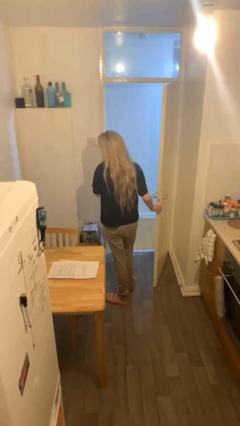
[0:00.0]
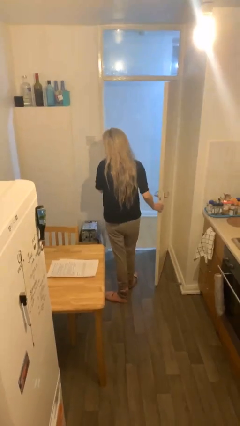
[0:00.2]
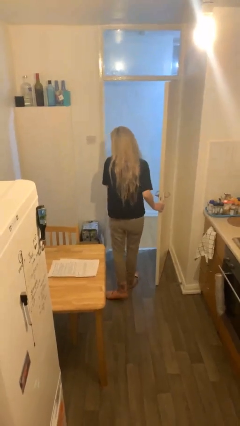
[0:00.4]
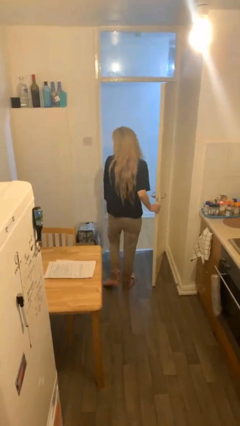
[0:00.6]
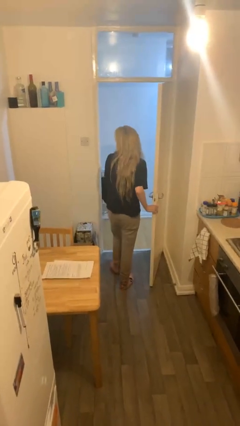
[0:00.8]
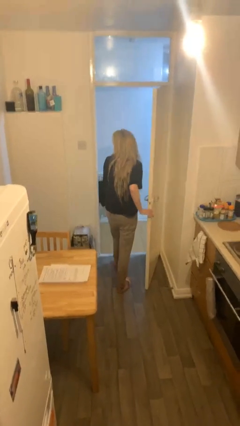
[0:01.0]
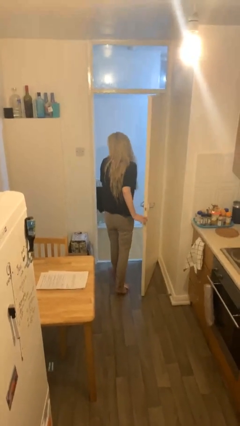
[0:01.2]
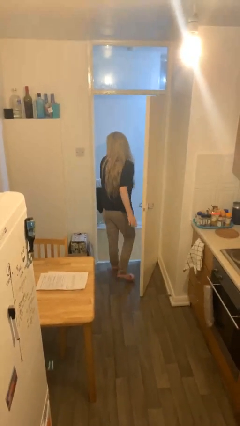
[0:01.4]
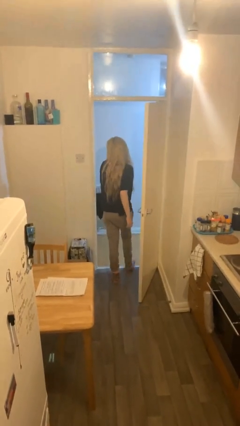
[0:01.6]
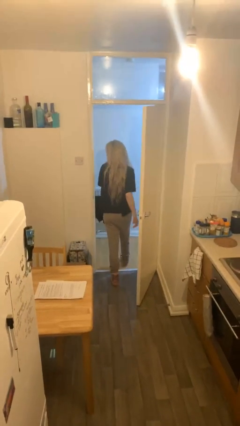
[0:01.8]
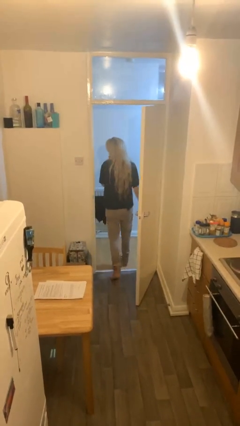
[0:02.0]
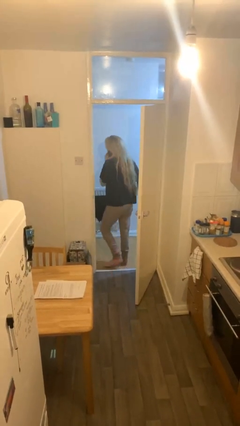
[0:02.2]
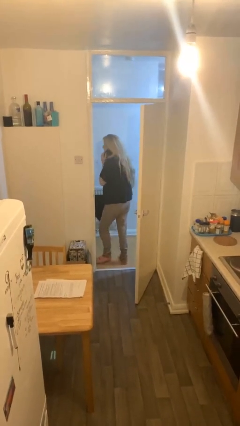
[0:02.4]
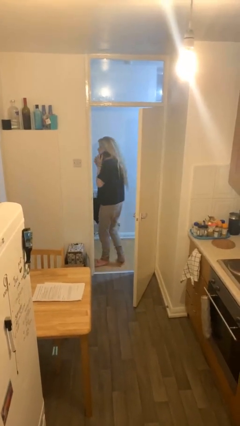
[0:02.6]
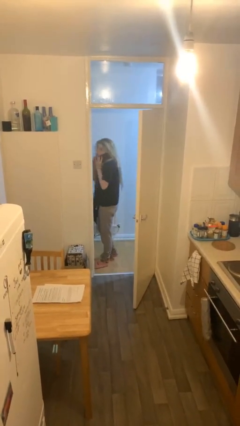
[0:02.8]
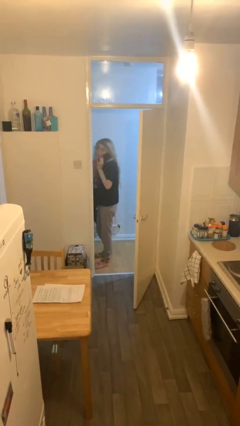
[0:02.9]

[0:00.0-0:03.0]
person exits scene through structure

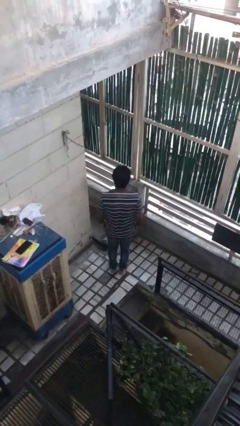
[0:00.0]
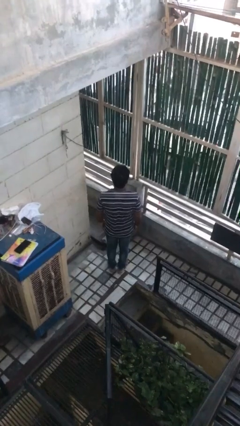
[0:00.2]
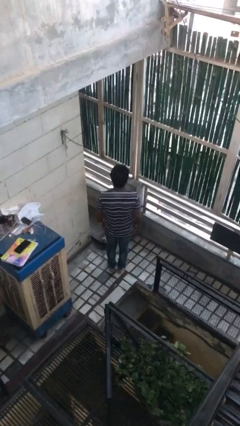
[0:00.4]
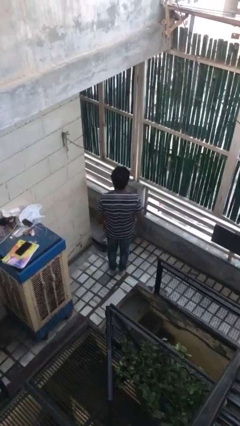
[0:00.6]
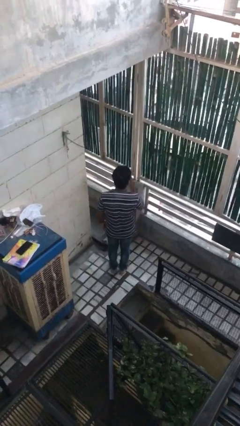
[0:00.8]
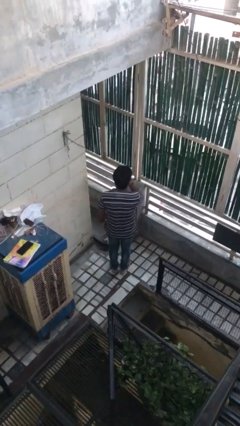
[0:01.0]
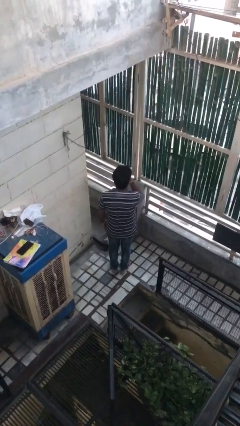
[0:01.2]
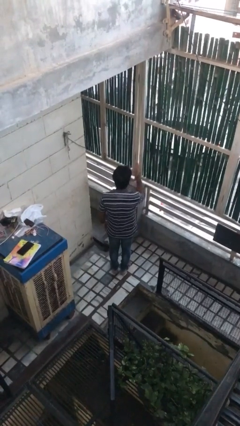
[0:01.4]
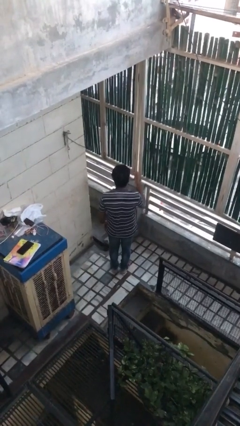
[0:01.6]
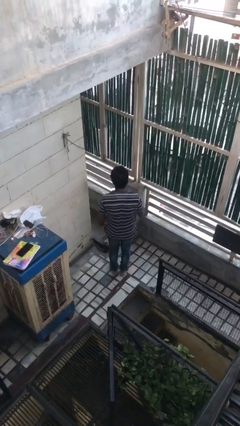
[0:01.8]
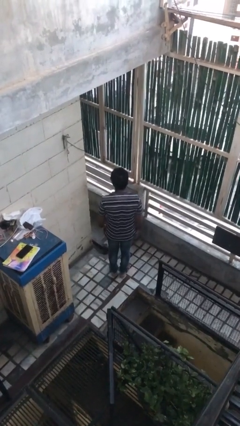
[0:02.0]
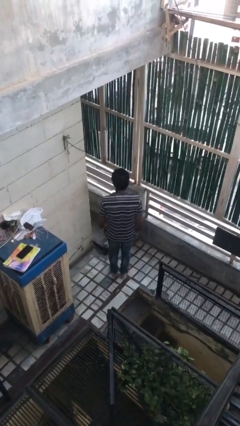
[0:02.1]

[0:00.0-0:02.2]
person gestures blow kiss

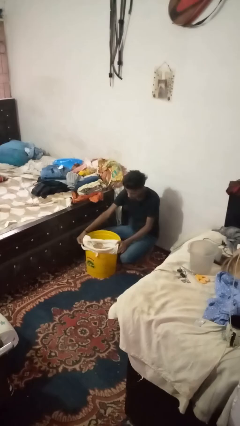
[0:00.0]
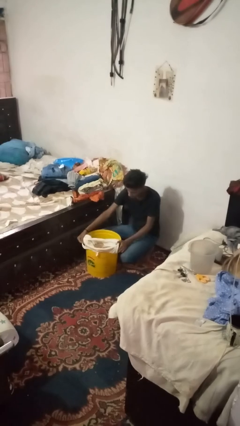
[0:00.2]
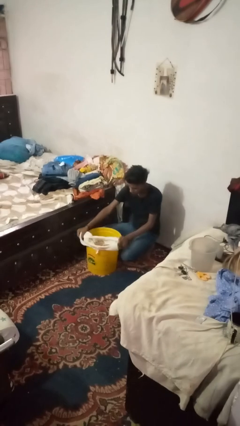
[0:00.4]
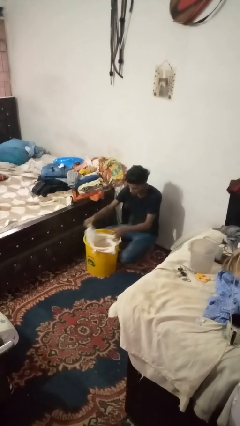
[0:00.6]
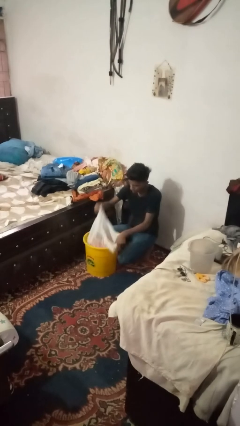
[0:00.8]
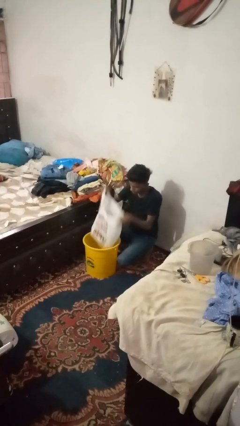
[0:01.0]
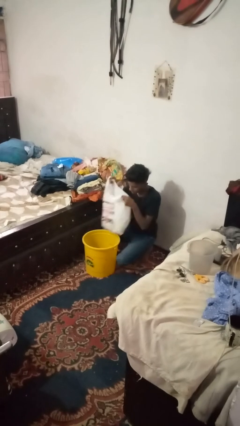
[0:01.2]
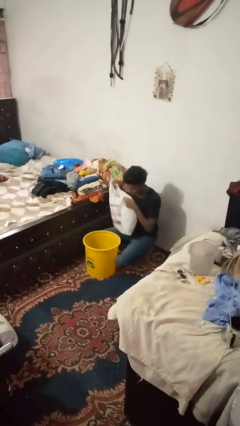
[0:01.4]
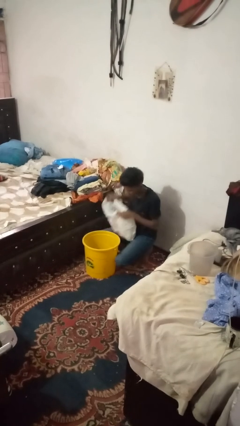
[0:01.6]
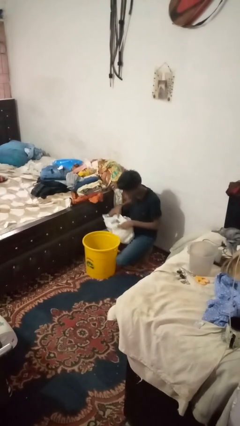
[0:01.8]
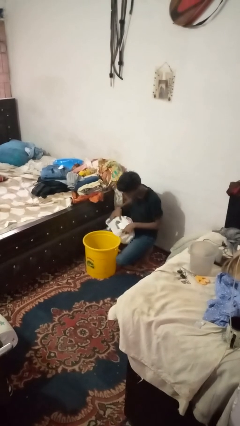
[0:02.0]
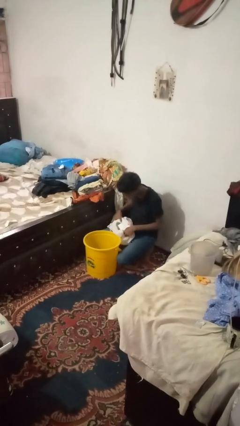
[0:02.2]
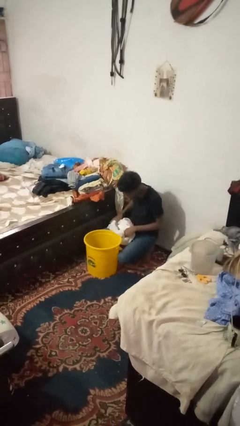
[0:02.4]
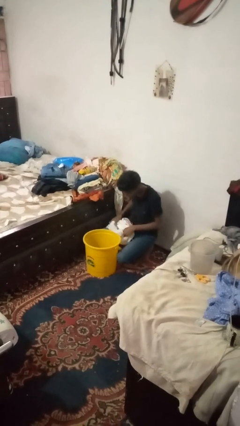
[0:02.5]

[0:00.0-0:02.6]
person removes trashbag from trashcan

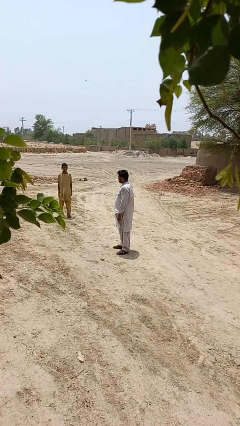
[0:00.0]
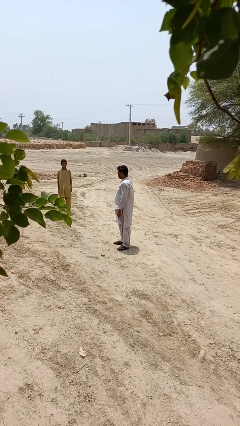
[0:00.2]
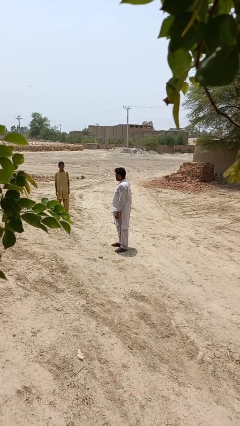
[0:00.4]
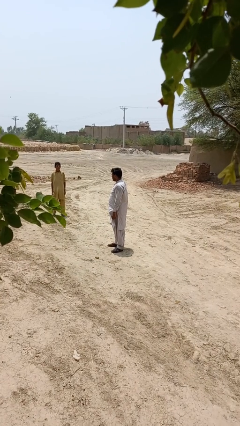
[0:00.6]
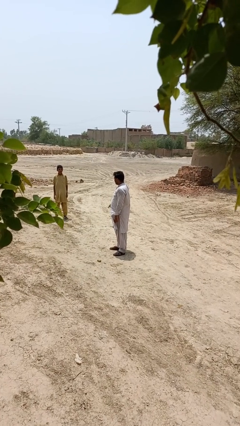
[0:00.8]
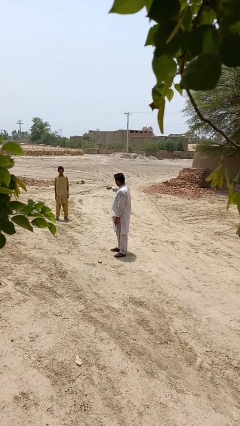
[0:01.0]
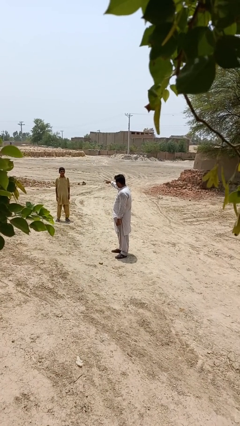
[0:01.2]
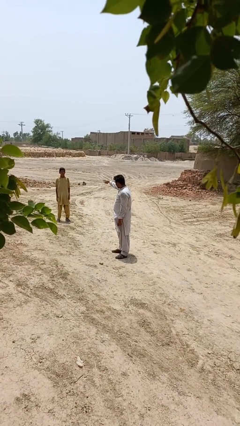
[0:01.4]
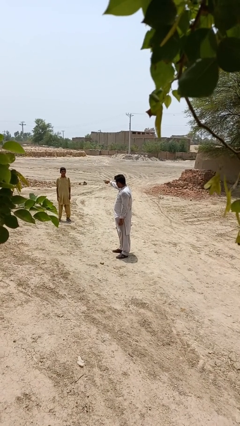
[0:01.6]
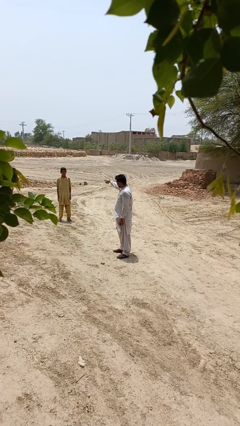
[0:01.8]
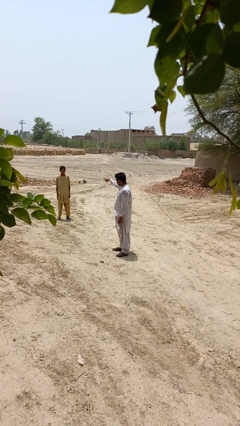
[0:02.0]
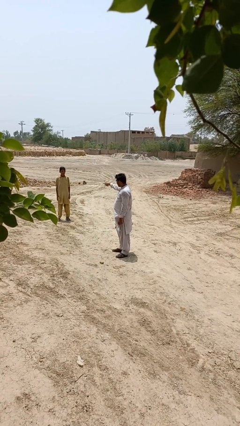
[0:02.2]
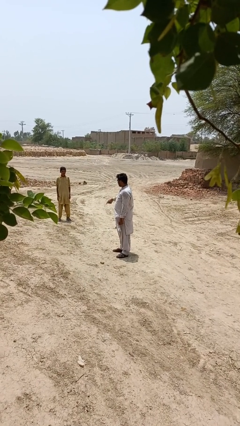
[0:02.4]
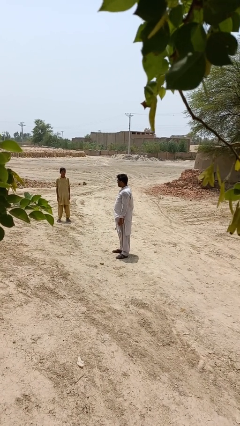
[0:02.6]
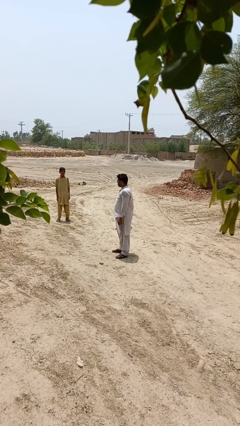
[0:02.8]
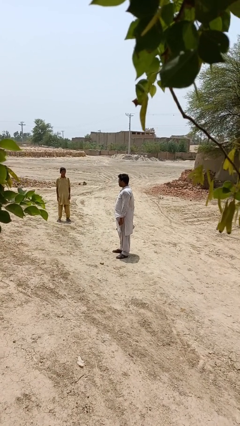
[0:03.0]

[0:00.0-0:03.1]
person points at person

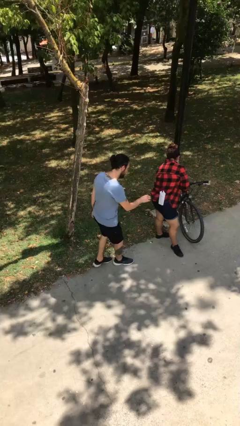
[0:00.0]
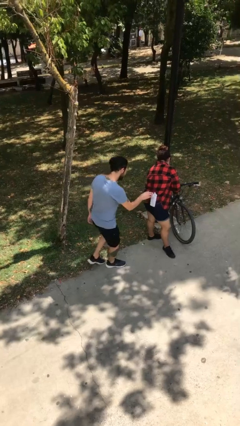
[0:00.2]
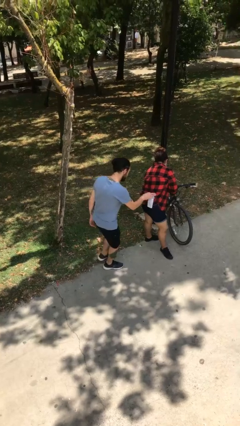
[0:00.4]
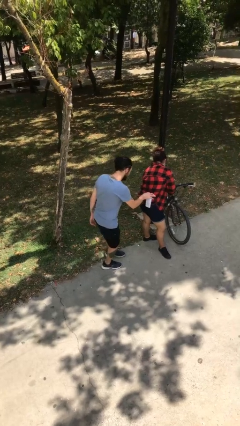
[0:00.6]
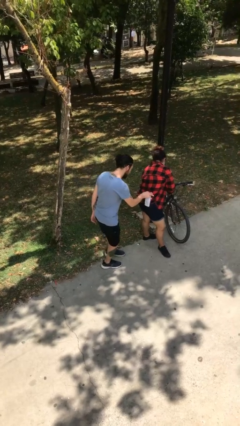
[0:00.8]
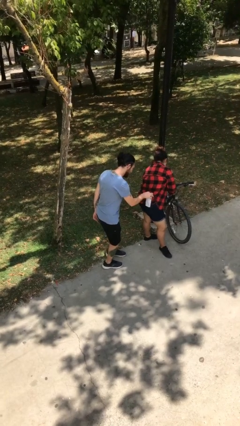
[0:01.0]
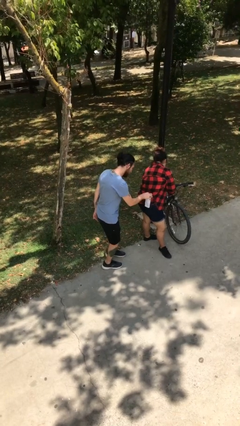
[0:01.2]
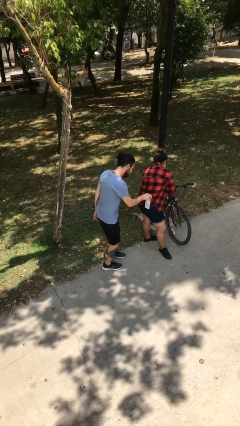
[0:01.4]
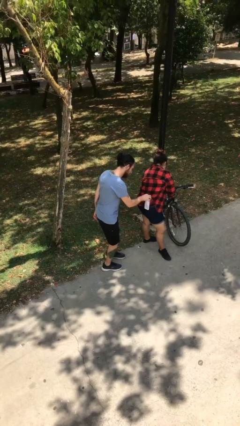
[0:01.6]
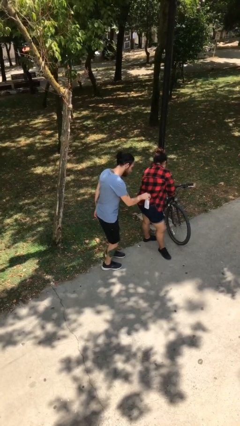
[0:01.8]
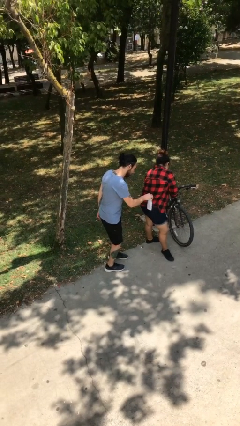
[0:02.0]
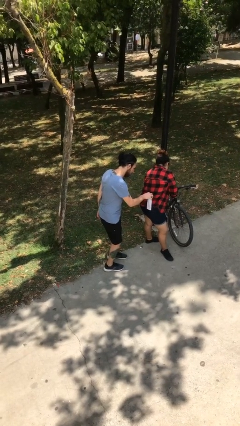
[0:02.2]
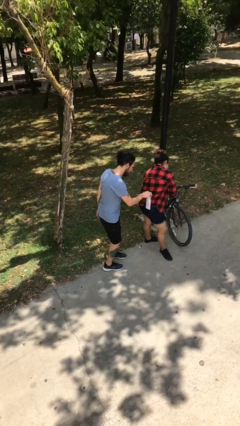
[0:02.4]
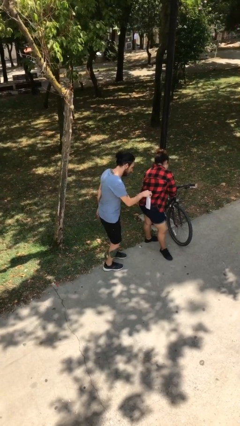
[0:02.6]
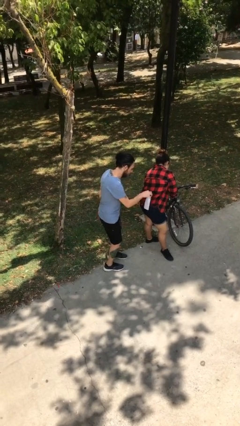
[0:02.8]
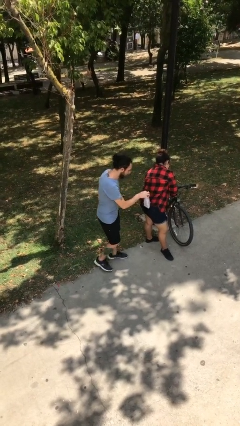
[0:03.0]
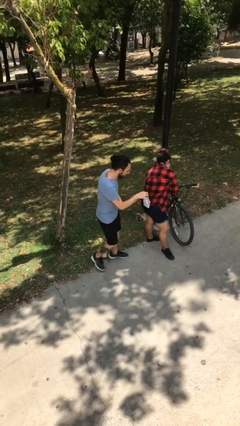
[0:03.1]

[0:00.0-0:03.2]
person steals object from person

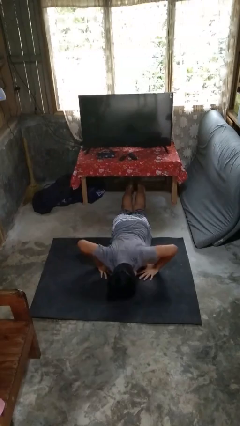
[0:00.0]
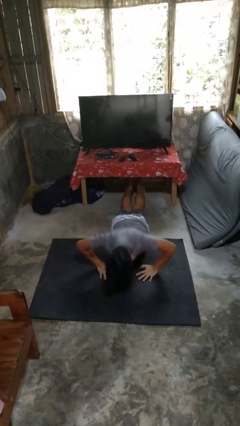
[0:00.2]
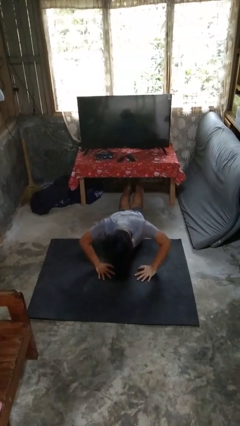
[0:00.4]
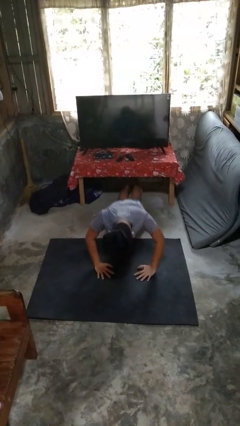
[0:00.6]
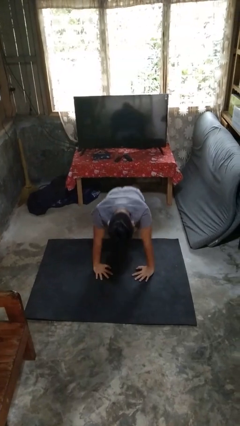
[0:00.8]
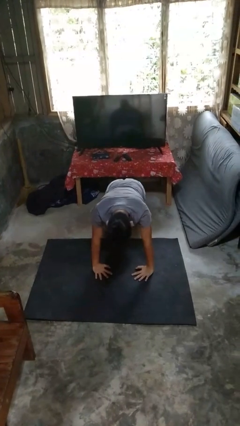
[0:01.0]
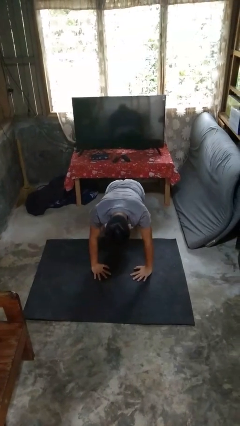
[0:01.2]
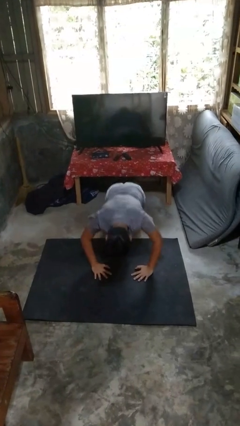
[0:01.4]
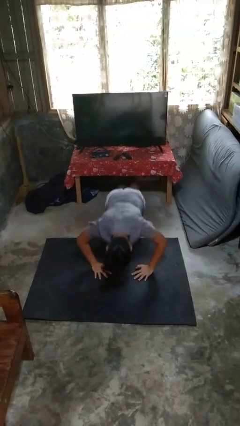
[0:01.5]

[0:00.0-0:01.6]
person exercises with pushup

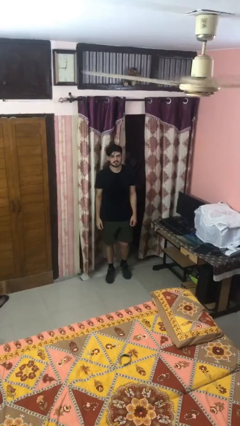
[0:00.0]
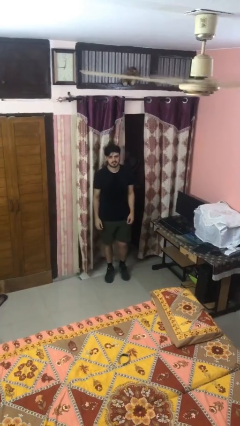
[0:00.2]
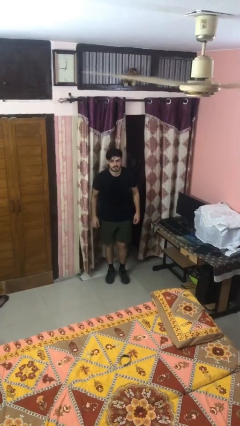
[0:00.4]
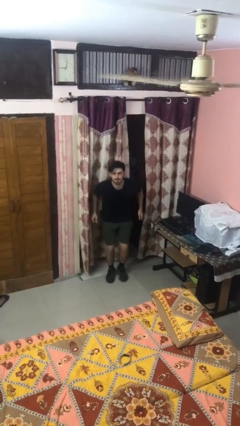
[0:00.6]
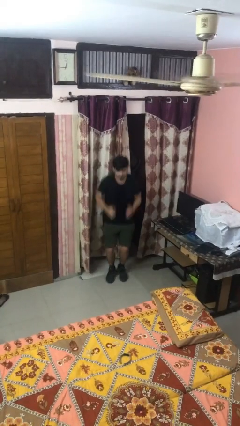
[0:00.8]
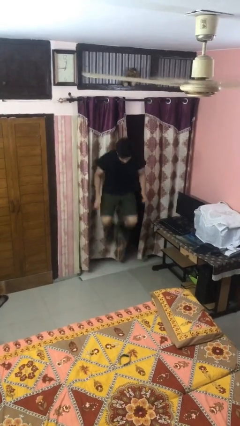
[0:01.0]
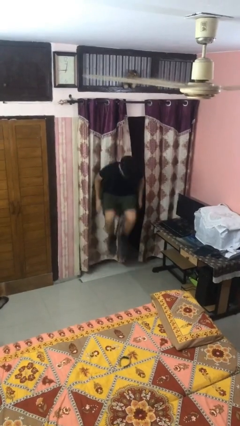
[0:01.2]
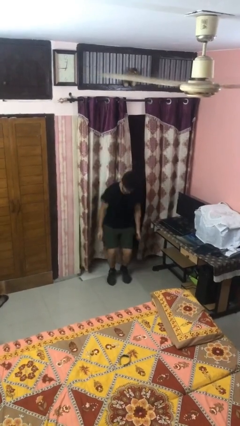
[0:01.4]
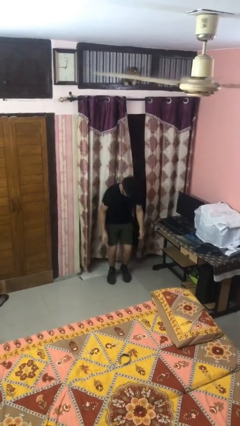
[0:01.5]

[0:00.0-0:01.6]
person jumps

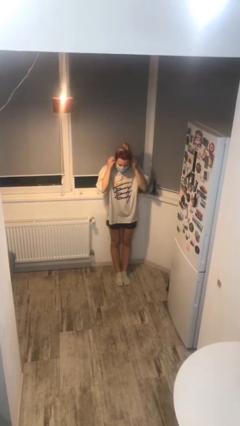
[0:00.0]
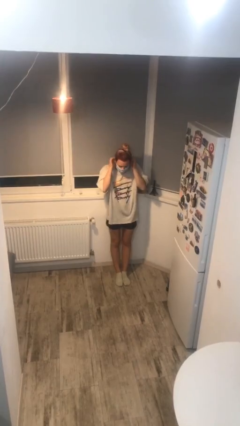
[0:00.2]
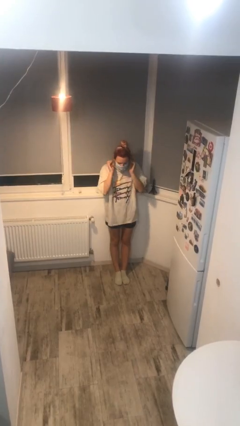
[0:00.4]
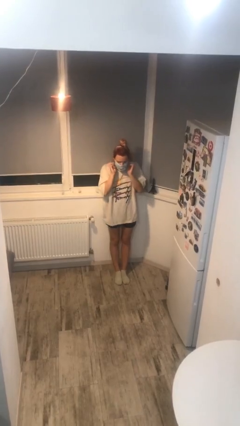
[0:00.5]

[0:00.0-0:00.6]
person puts on facemask
